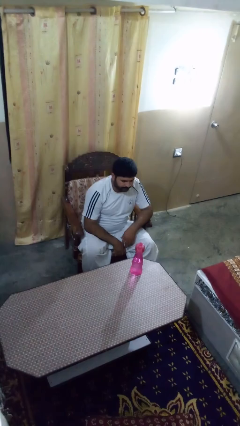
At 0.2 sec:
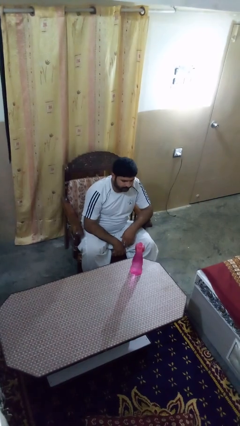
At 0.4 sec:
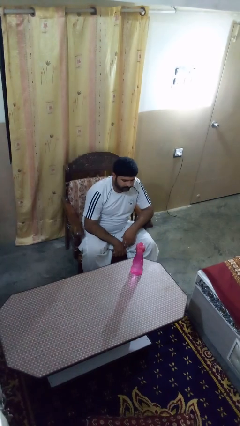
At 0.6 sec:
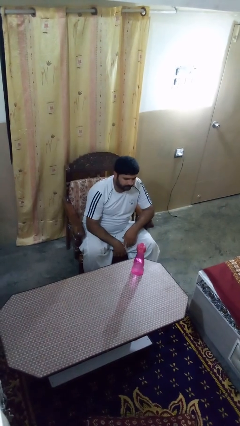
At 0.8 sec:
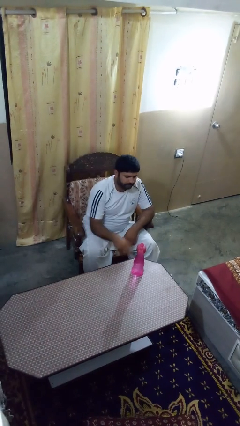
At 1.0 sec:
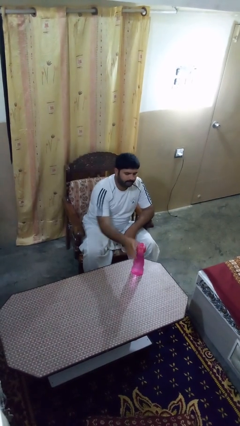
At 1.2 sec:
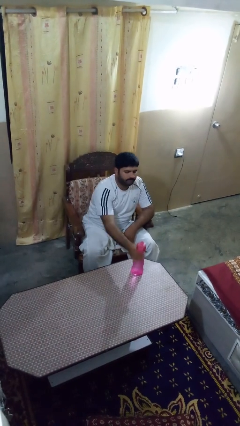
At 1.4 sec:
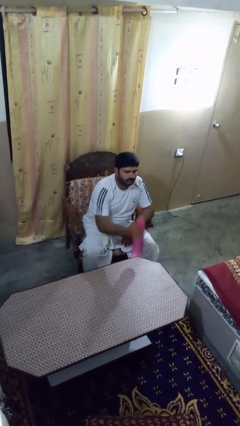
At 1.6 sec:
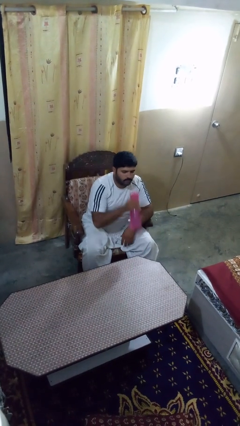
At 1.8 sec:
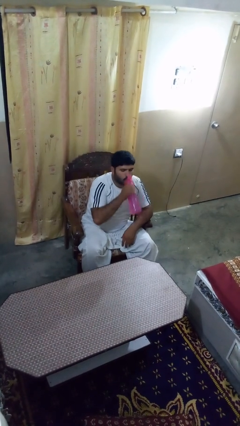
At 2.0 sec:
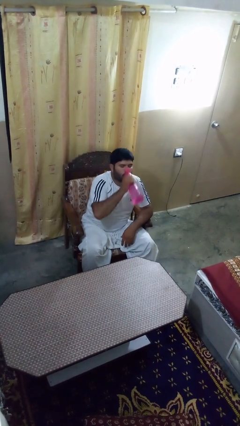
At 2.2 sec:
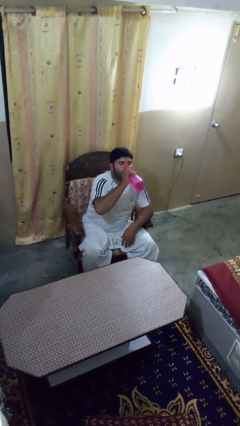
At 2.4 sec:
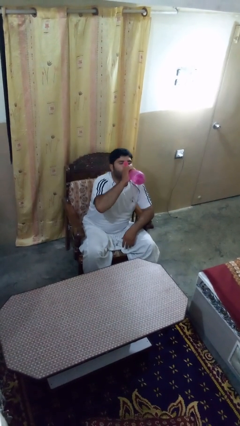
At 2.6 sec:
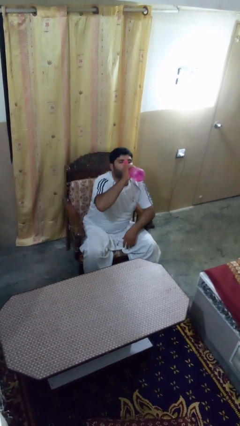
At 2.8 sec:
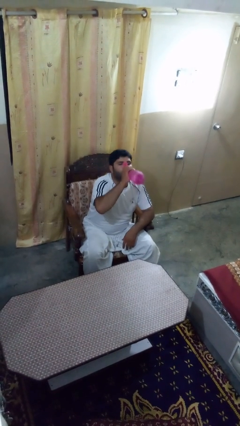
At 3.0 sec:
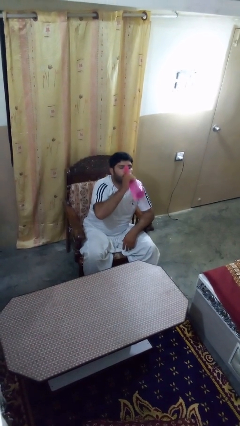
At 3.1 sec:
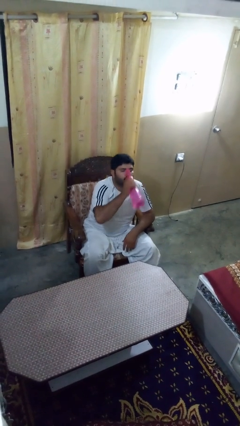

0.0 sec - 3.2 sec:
person drinks from bottle

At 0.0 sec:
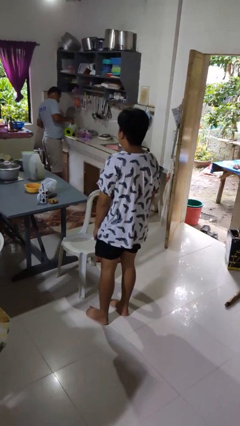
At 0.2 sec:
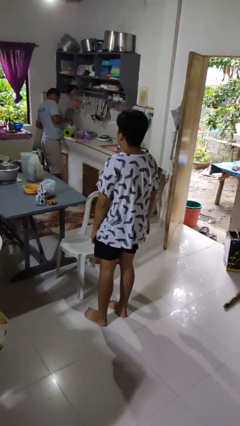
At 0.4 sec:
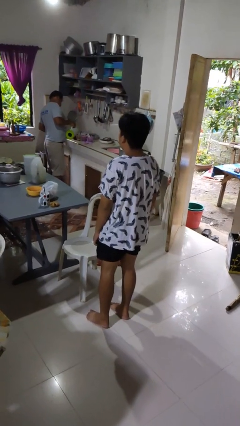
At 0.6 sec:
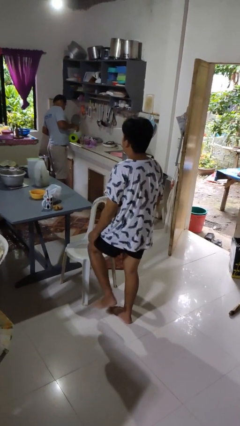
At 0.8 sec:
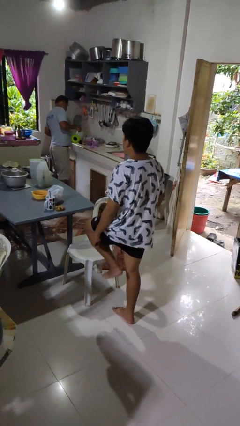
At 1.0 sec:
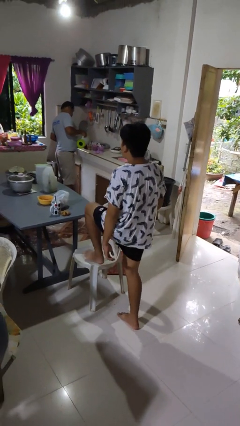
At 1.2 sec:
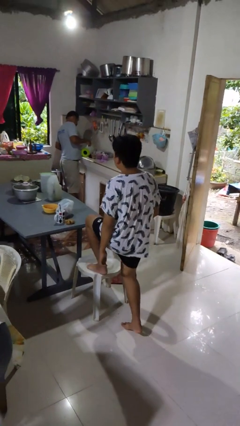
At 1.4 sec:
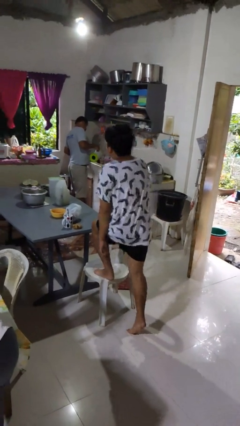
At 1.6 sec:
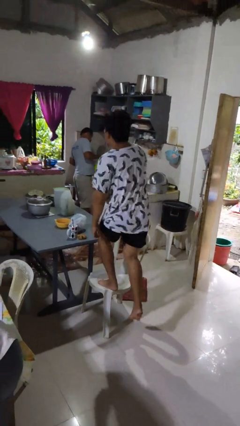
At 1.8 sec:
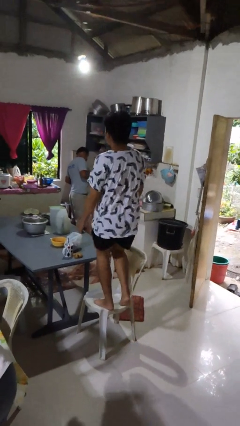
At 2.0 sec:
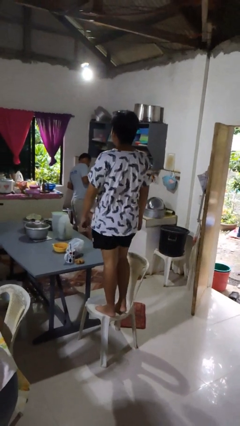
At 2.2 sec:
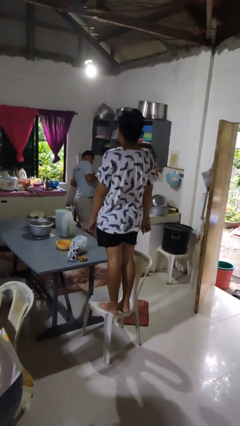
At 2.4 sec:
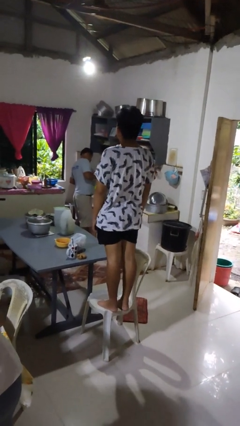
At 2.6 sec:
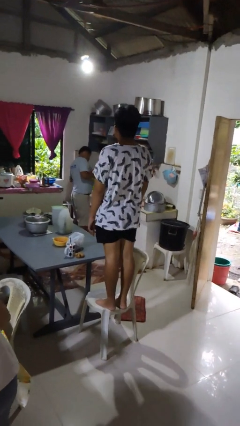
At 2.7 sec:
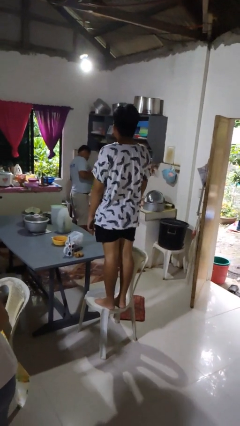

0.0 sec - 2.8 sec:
person climbs on chair

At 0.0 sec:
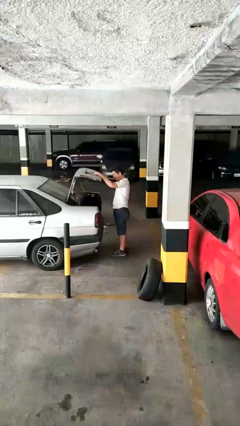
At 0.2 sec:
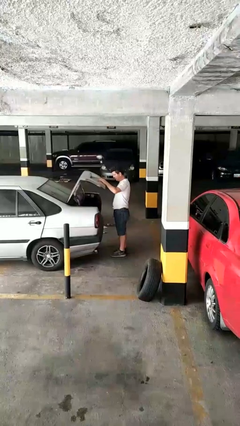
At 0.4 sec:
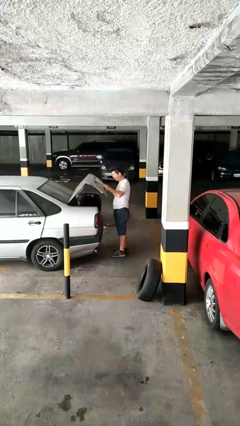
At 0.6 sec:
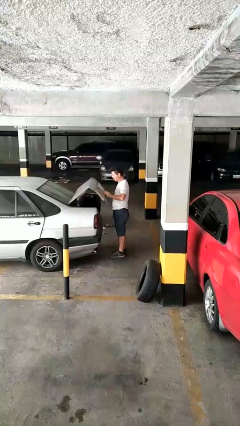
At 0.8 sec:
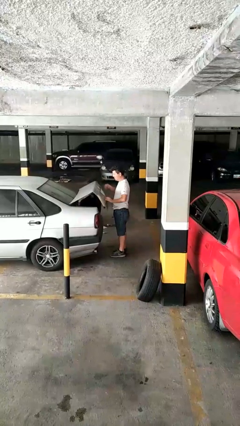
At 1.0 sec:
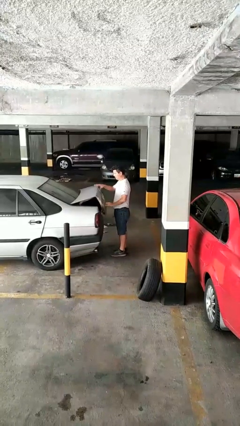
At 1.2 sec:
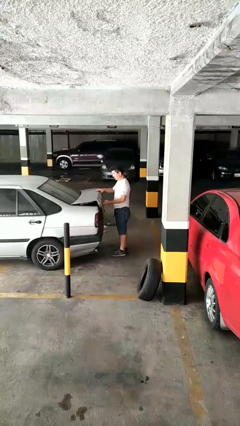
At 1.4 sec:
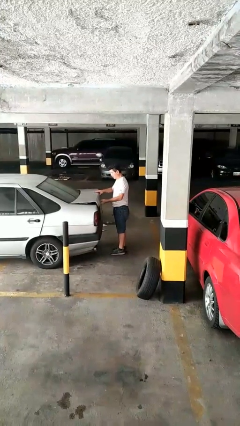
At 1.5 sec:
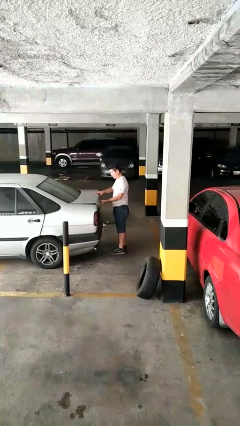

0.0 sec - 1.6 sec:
person closes car trunk

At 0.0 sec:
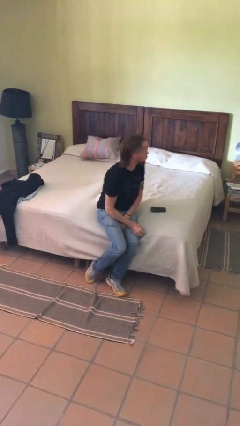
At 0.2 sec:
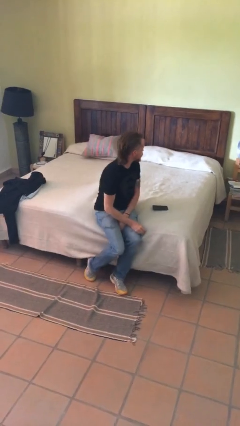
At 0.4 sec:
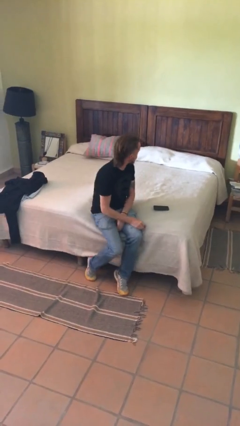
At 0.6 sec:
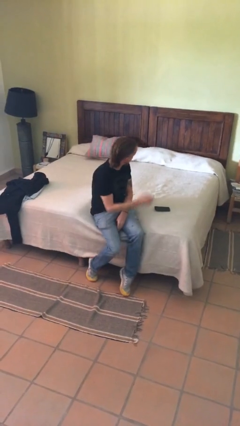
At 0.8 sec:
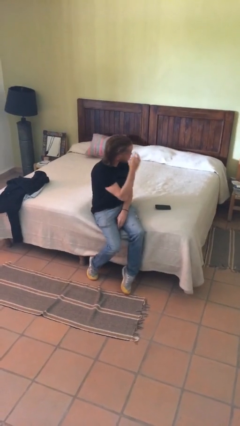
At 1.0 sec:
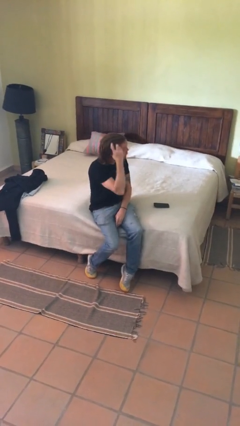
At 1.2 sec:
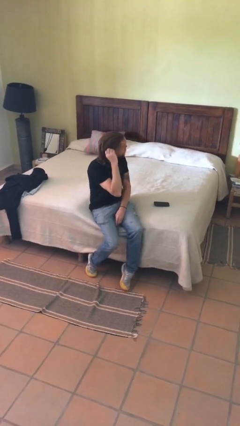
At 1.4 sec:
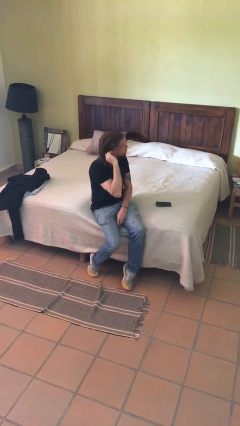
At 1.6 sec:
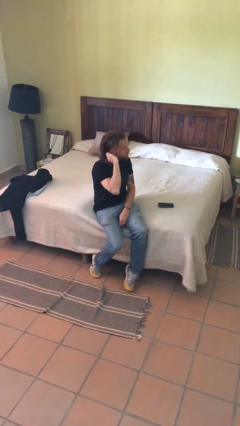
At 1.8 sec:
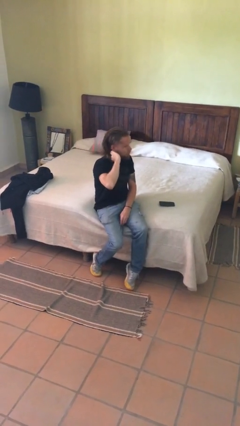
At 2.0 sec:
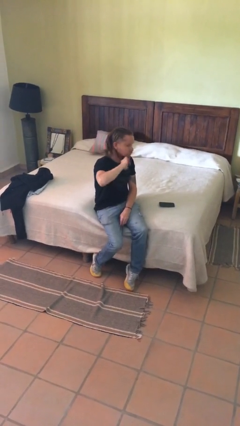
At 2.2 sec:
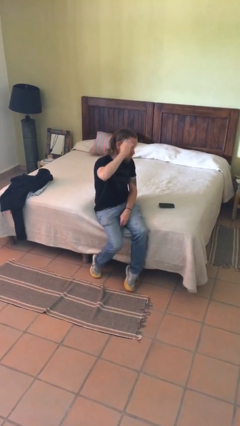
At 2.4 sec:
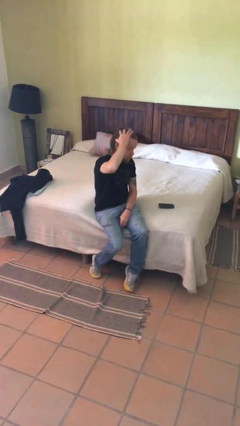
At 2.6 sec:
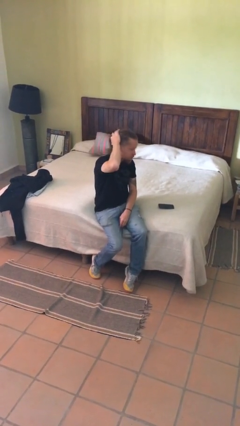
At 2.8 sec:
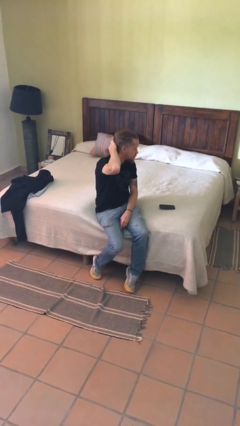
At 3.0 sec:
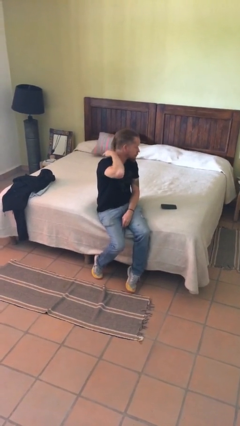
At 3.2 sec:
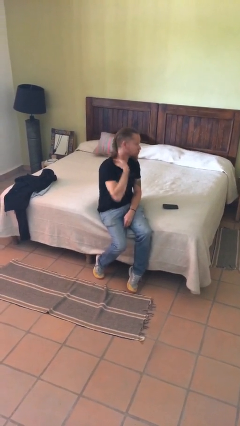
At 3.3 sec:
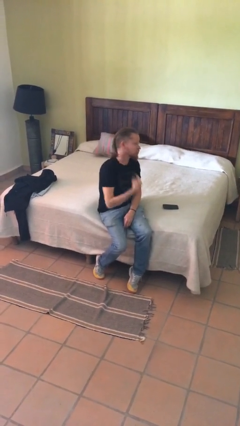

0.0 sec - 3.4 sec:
person strokes hair

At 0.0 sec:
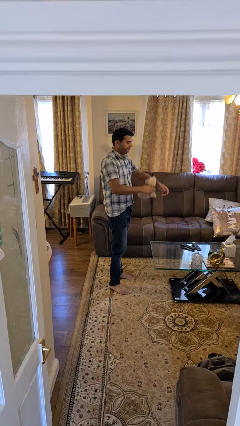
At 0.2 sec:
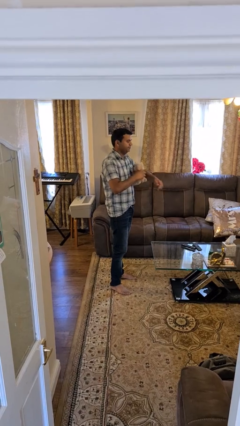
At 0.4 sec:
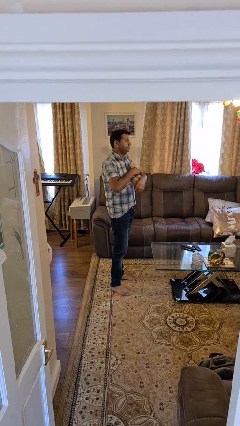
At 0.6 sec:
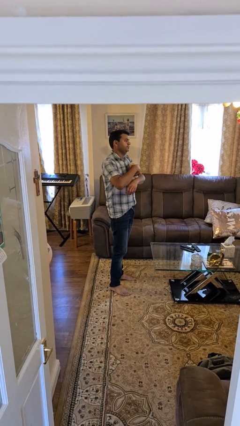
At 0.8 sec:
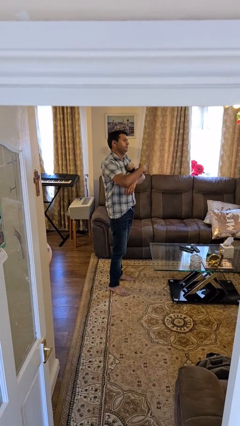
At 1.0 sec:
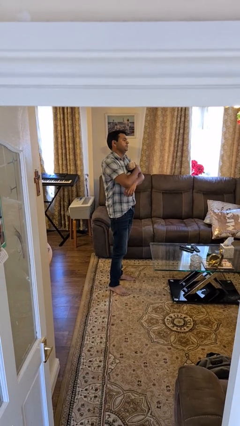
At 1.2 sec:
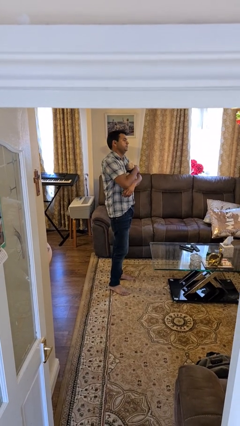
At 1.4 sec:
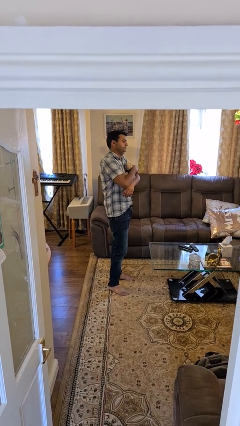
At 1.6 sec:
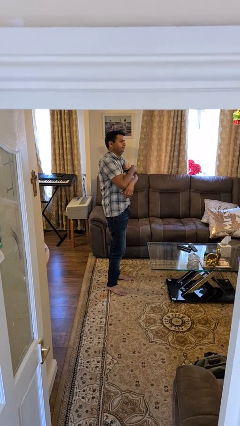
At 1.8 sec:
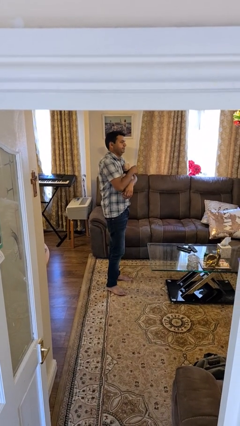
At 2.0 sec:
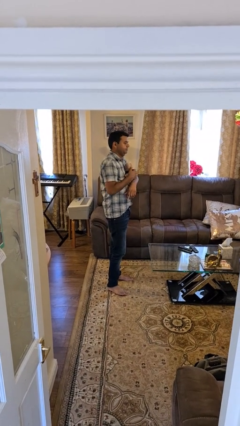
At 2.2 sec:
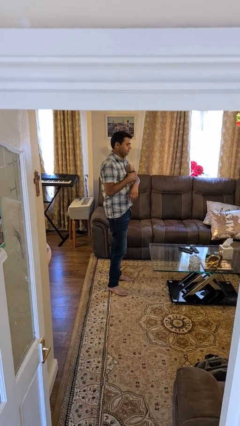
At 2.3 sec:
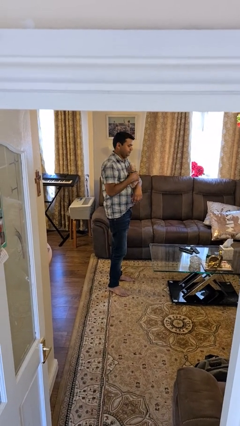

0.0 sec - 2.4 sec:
person hugs stuffed animal

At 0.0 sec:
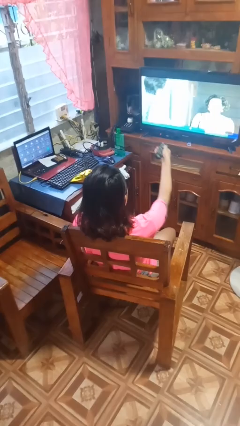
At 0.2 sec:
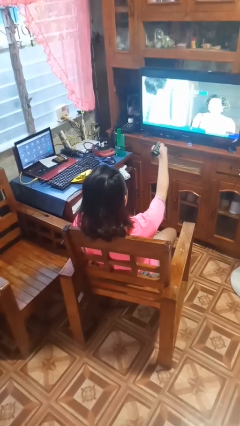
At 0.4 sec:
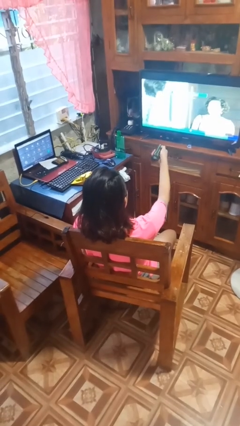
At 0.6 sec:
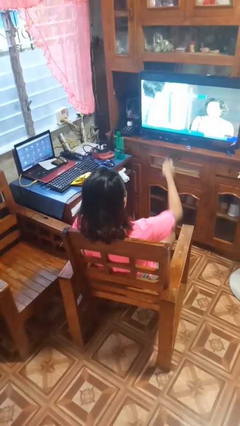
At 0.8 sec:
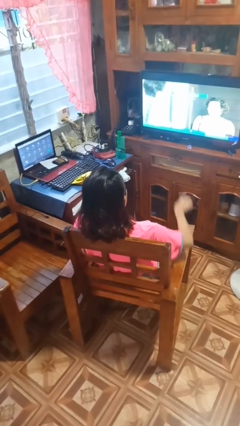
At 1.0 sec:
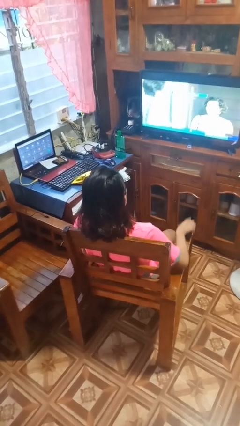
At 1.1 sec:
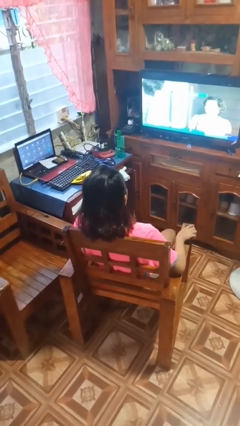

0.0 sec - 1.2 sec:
person uses television remote

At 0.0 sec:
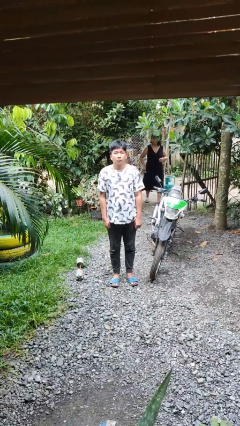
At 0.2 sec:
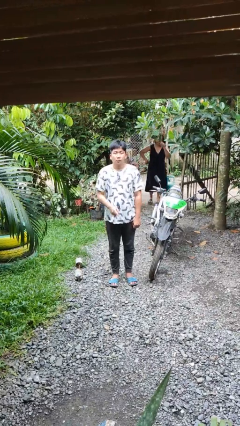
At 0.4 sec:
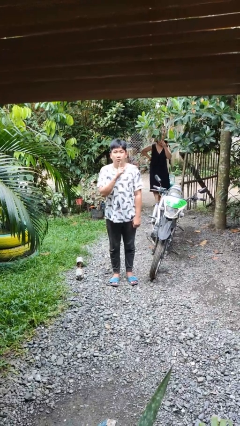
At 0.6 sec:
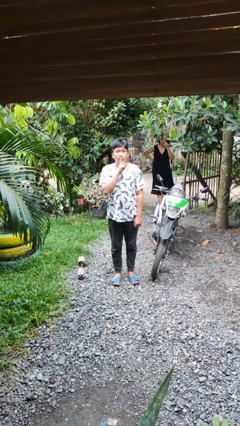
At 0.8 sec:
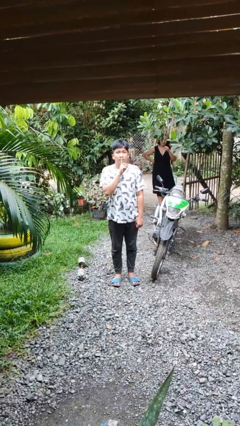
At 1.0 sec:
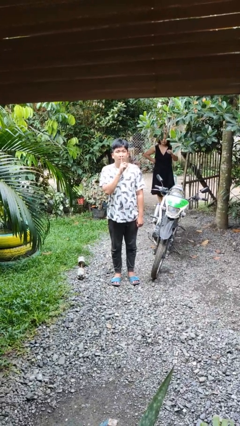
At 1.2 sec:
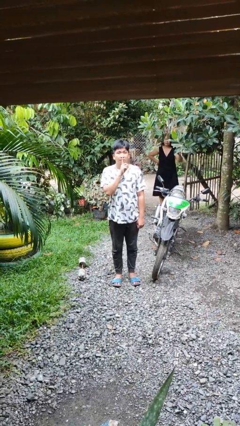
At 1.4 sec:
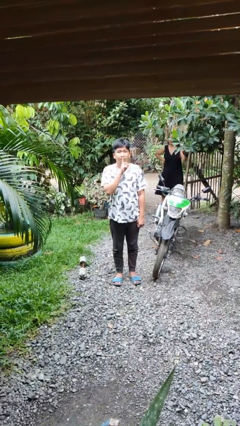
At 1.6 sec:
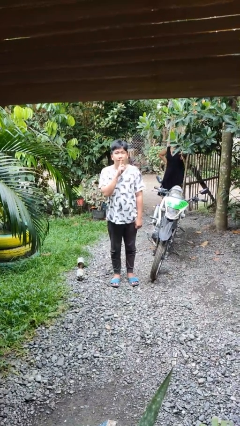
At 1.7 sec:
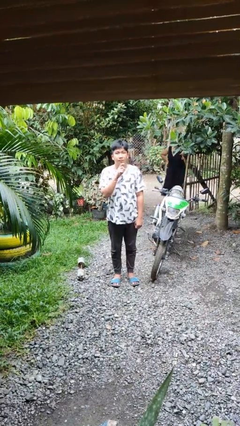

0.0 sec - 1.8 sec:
person gestures be quiet

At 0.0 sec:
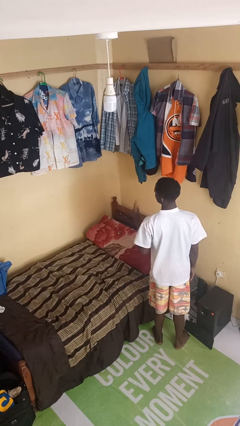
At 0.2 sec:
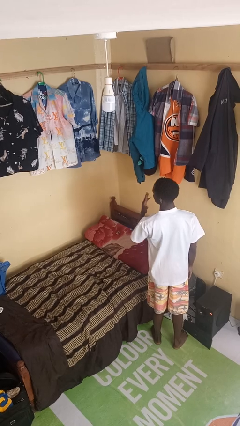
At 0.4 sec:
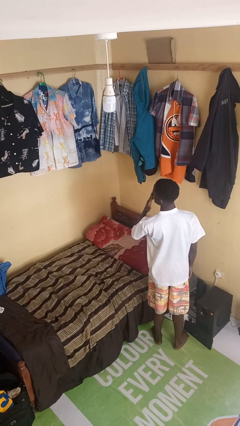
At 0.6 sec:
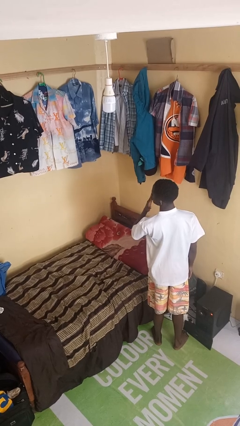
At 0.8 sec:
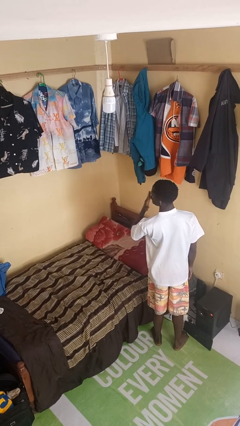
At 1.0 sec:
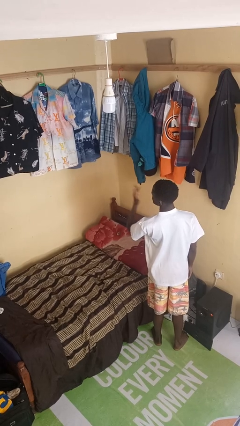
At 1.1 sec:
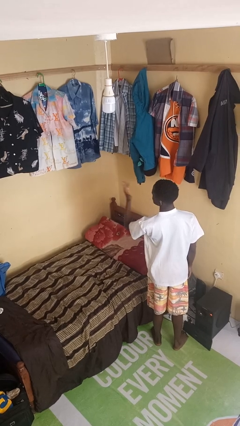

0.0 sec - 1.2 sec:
person gestures blow kiss
